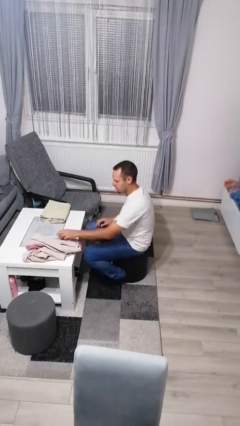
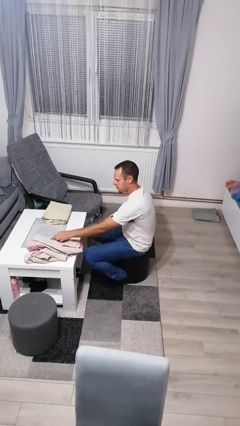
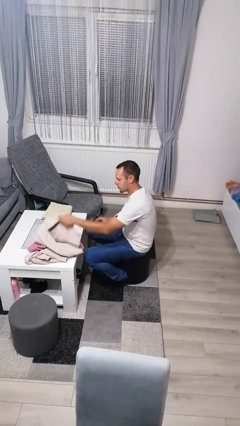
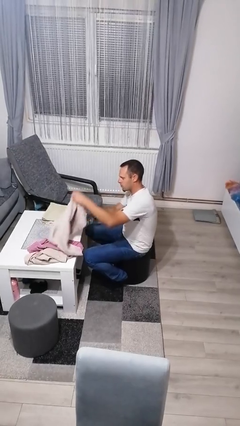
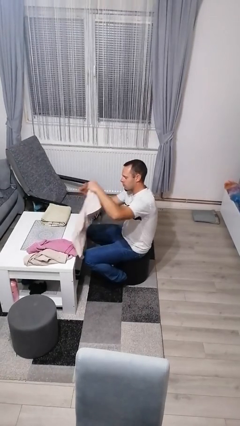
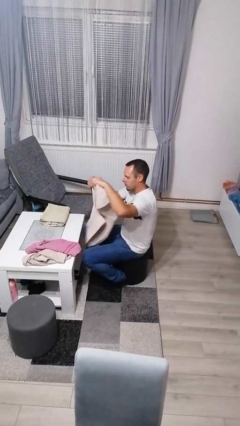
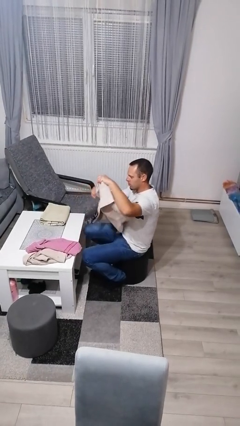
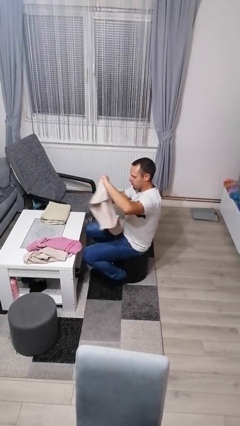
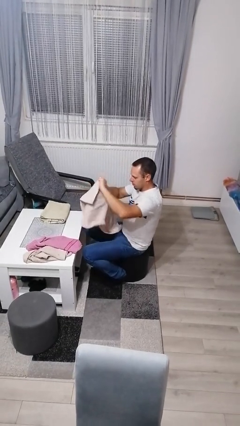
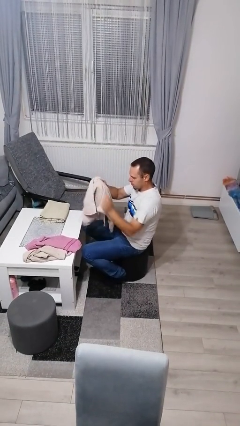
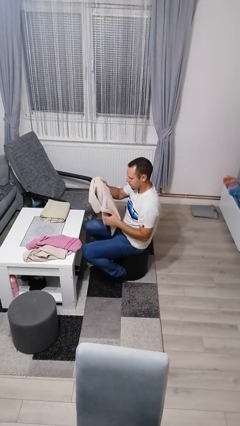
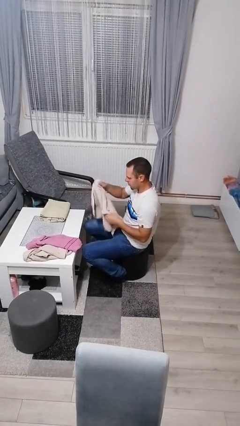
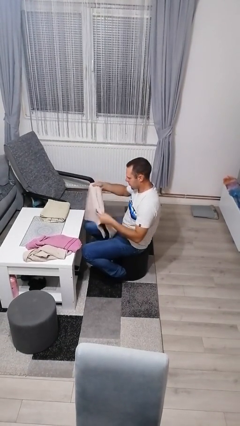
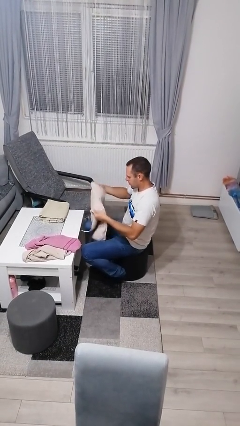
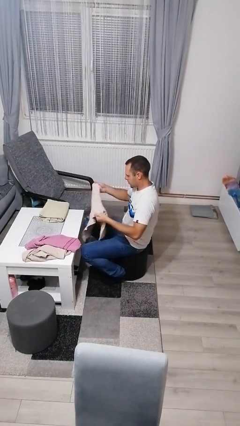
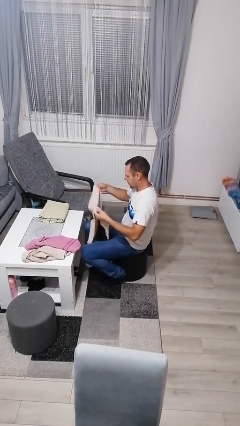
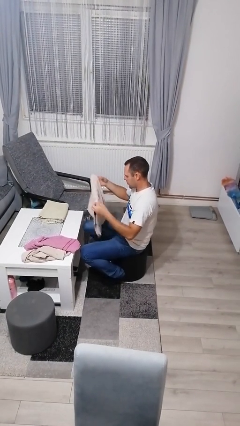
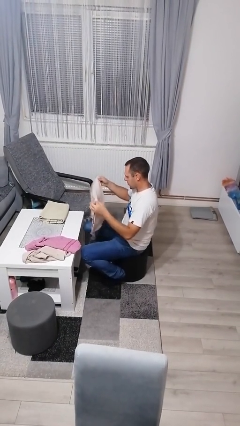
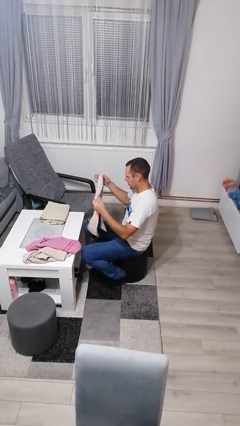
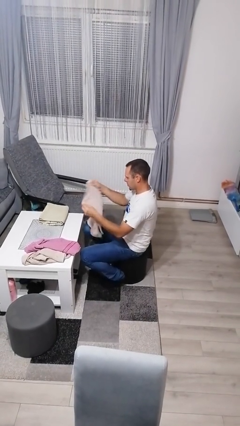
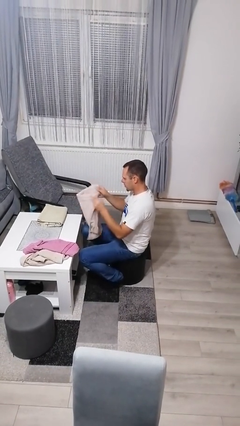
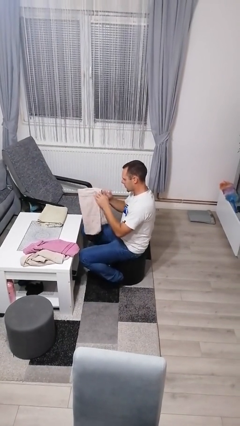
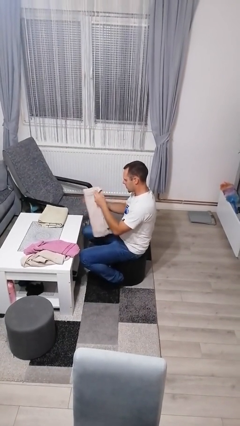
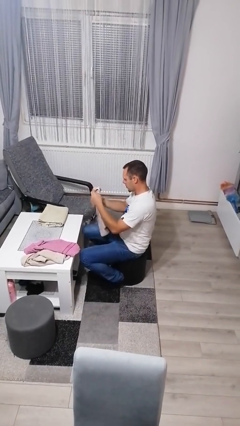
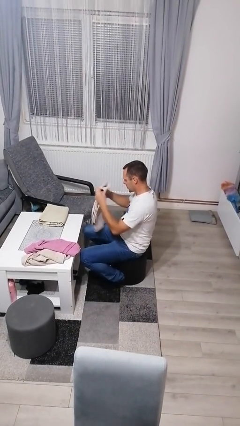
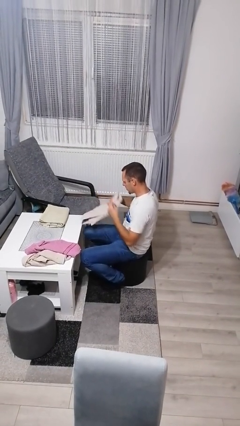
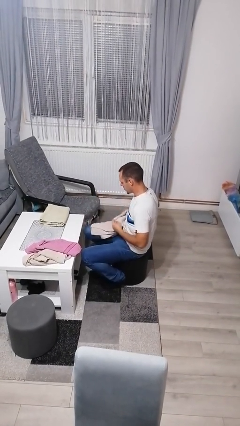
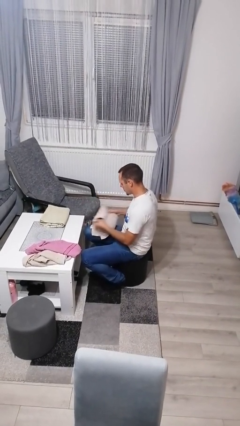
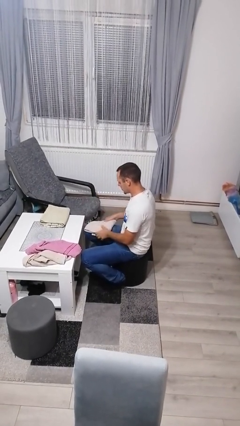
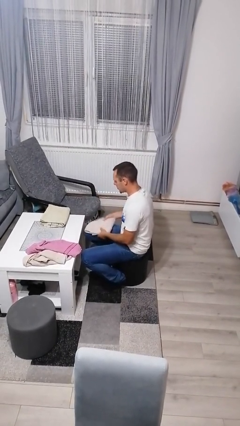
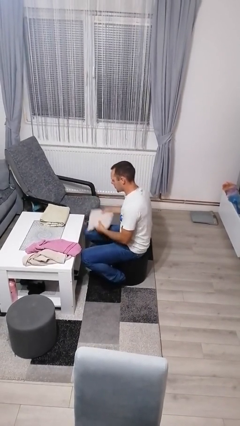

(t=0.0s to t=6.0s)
person folds towel

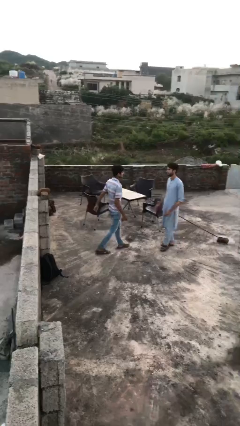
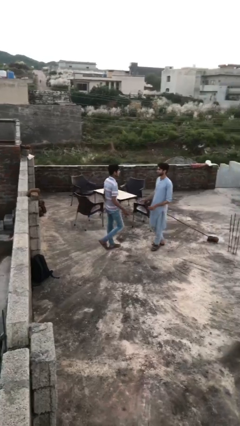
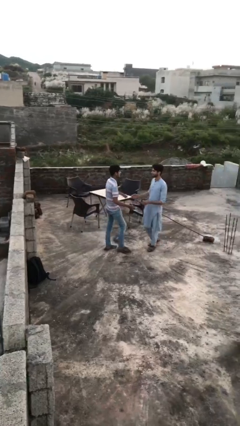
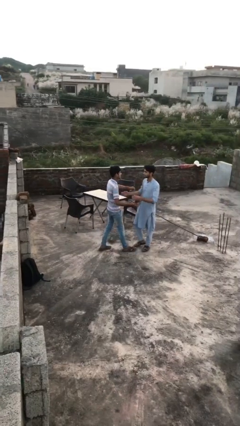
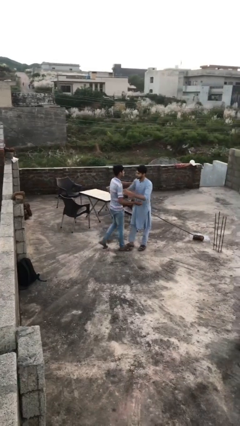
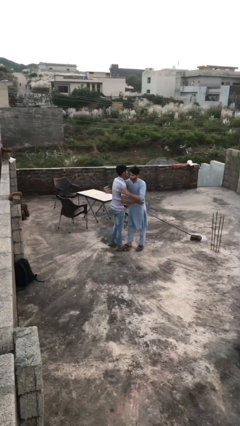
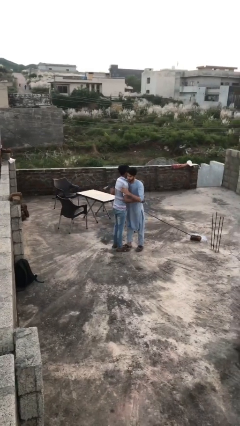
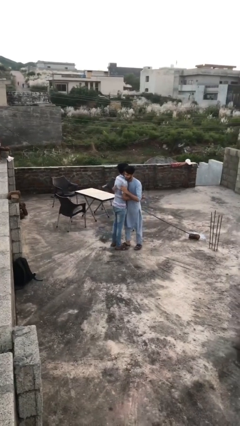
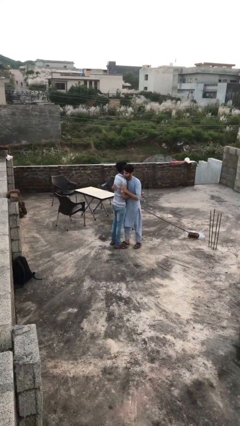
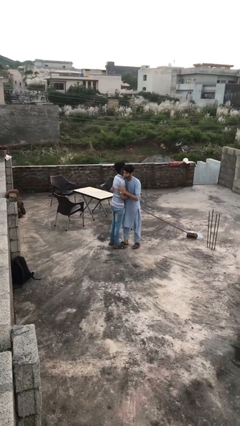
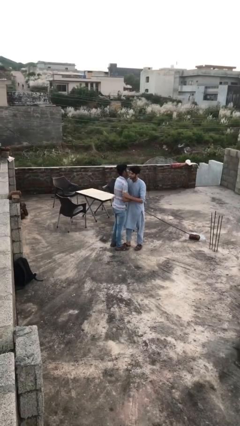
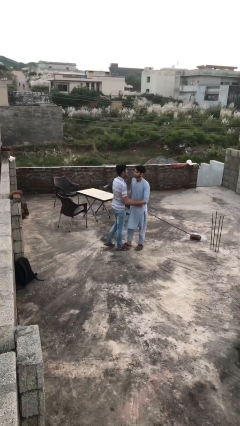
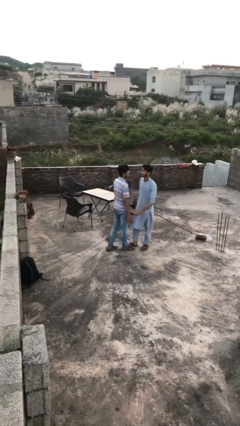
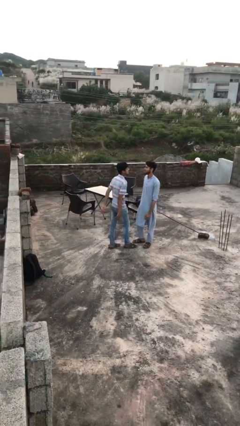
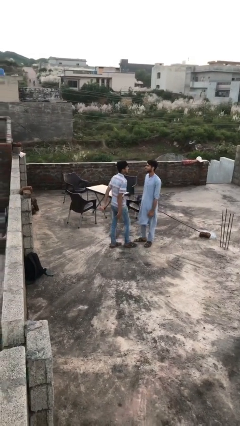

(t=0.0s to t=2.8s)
person embraces person

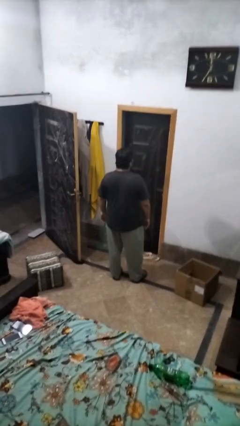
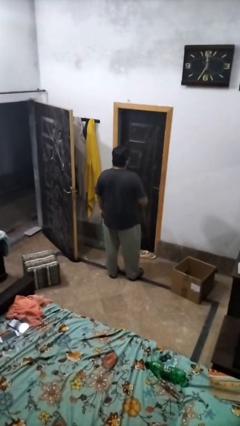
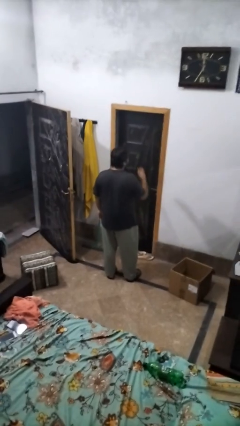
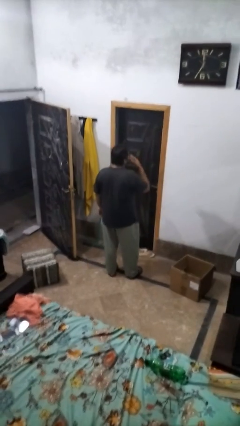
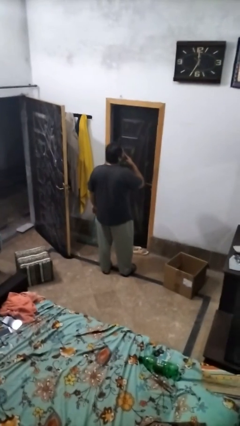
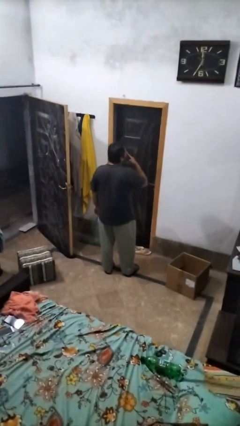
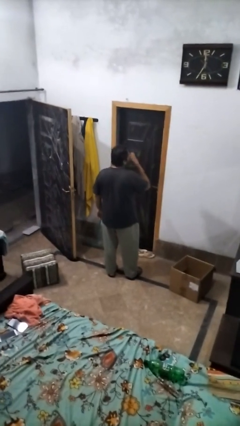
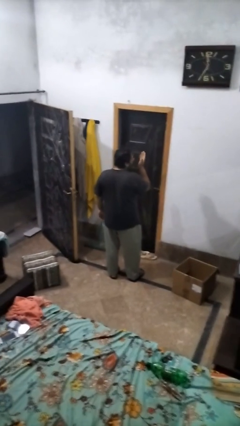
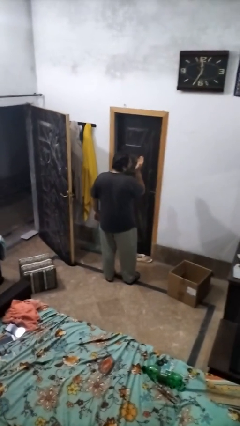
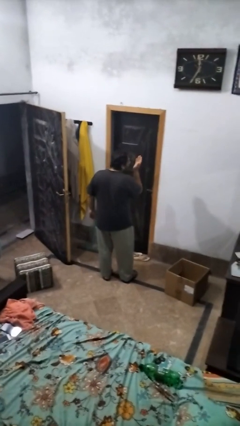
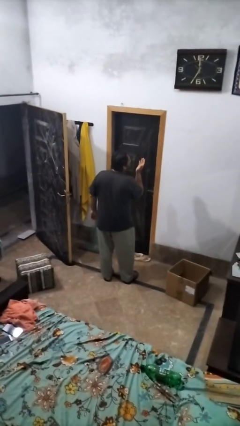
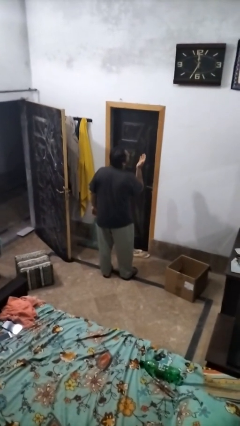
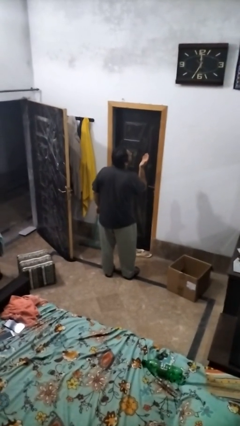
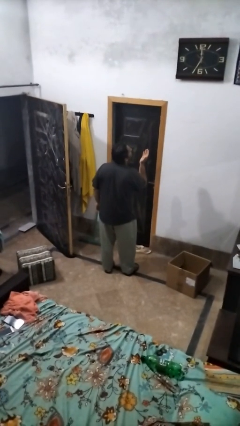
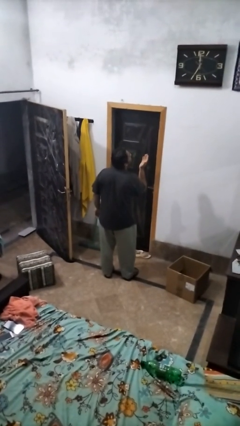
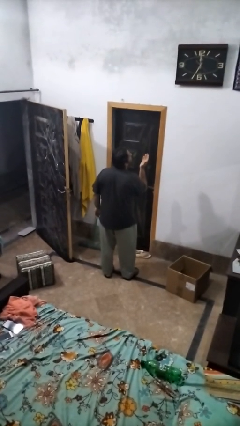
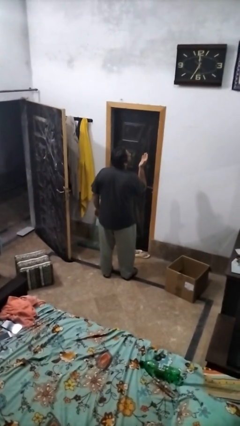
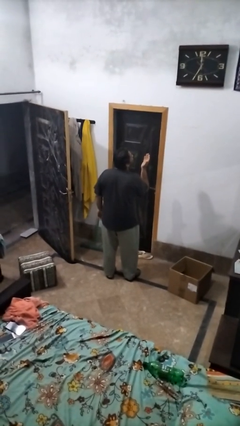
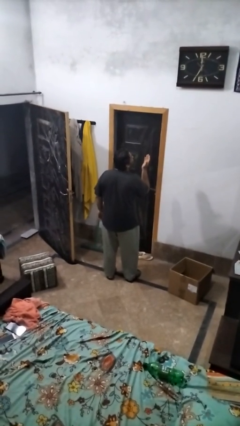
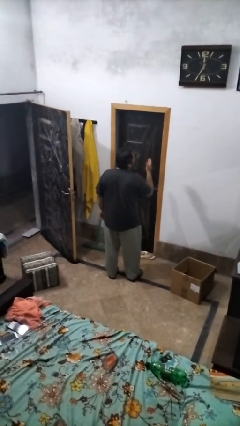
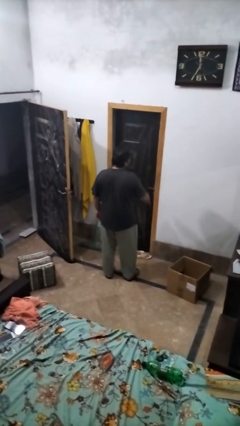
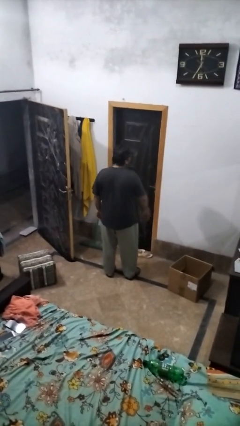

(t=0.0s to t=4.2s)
person gestures blow kiss

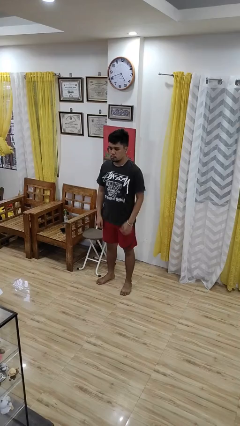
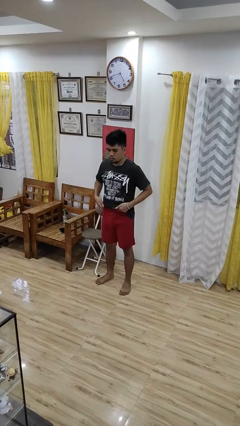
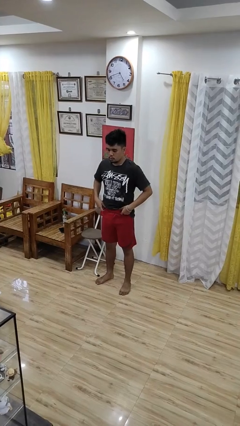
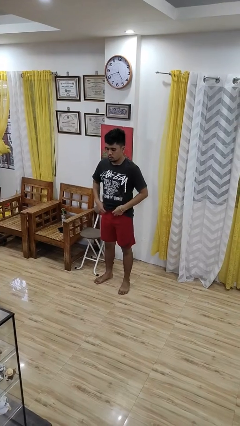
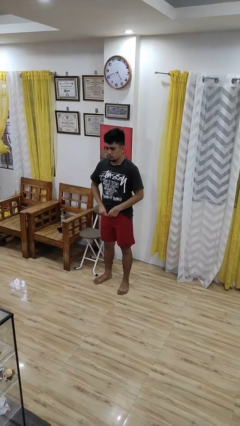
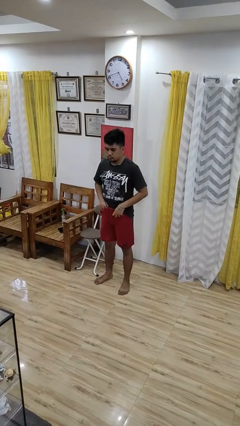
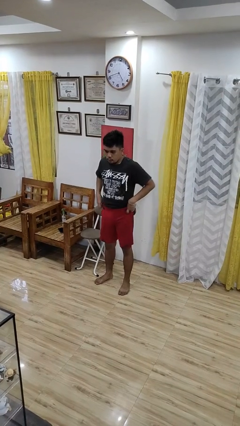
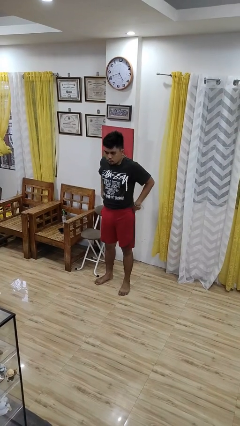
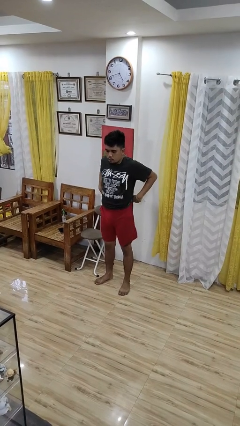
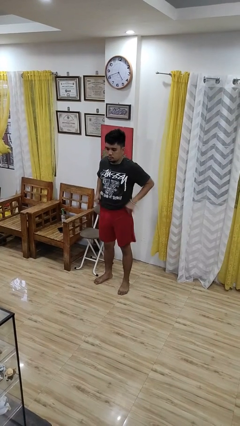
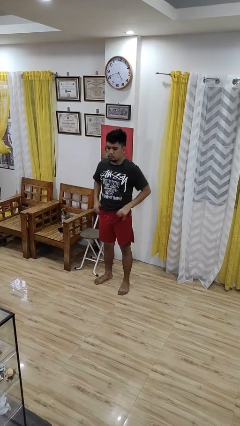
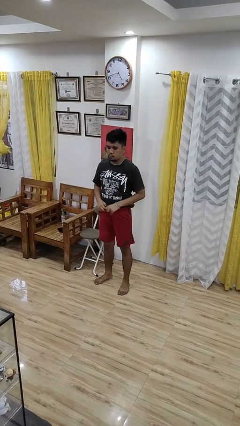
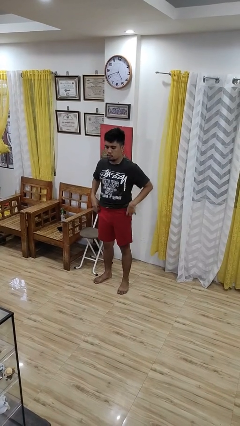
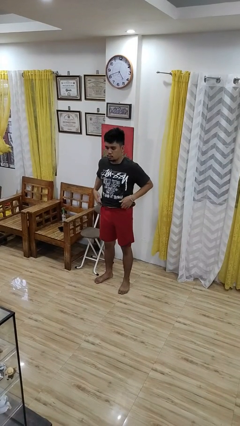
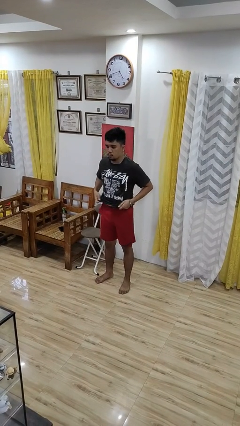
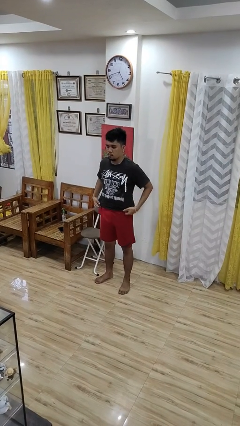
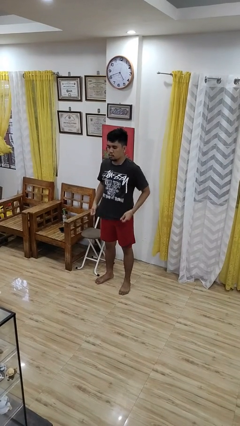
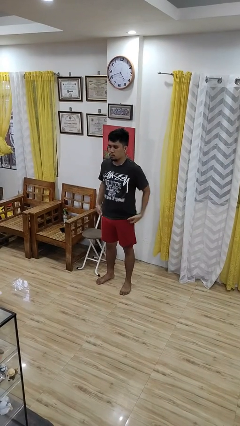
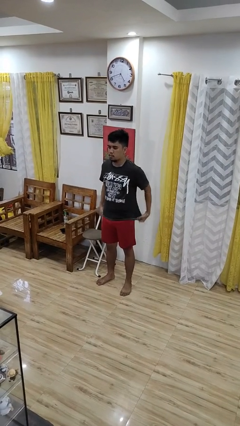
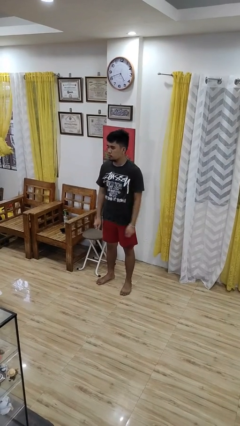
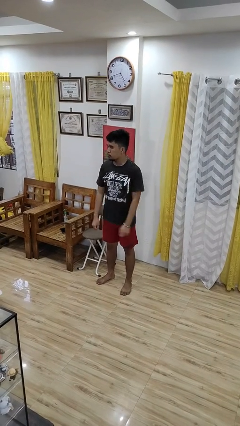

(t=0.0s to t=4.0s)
person hikes up pants

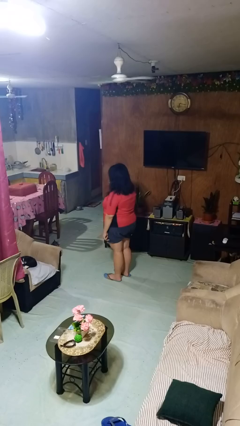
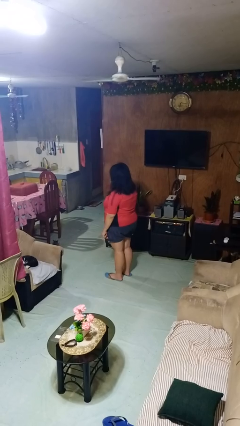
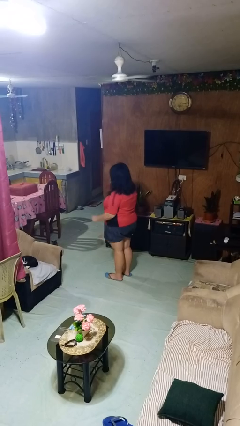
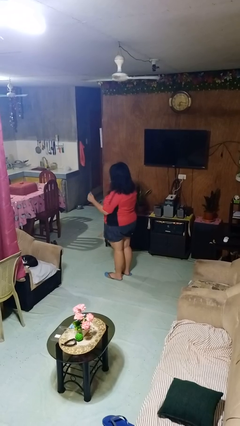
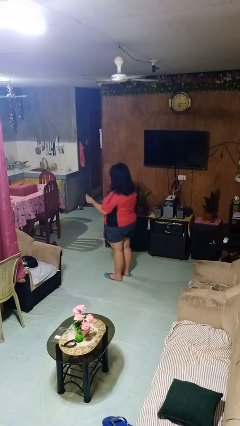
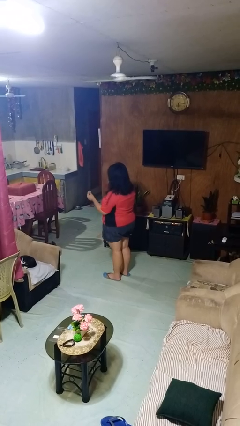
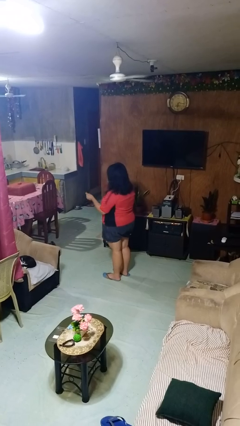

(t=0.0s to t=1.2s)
person snaps fingers
